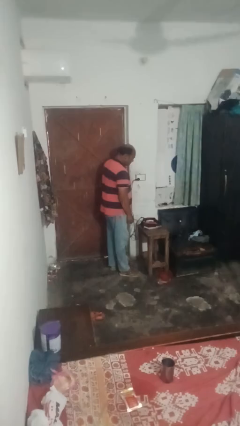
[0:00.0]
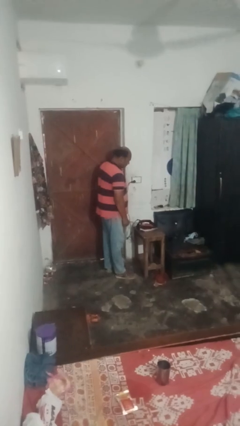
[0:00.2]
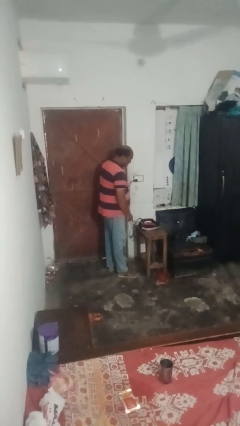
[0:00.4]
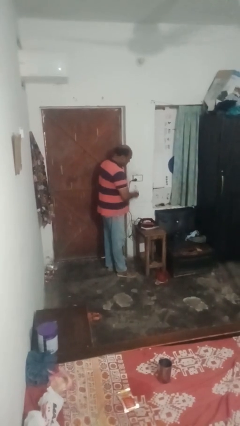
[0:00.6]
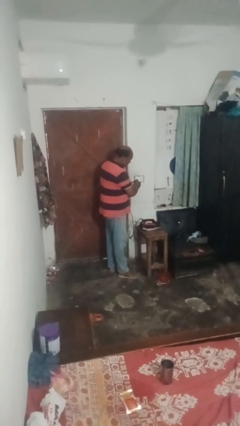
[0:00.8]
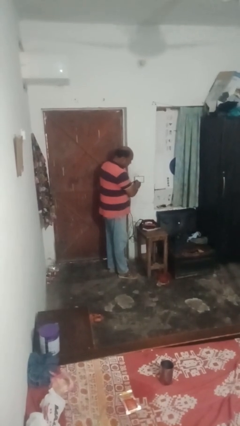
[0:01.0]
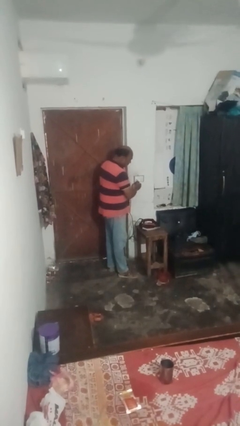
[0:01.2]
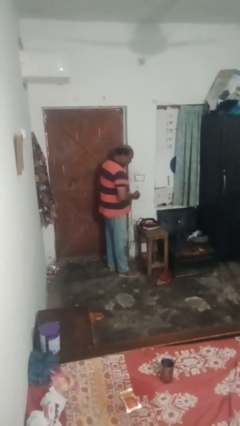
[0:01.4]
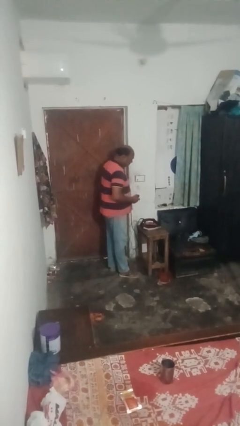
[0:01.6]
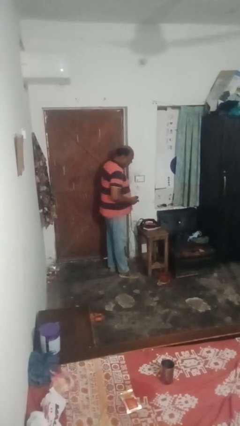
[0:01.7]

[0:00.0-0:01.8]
person unplugs from electrical socket

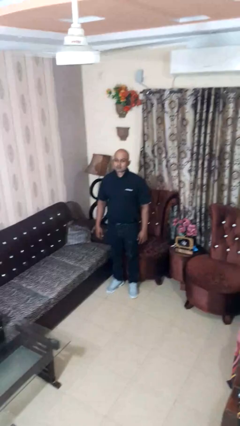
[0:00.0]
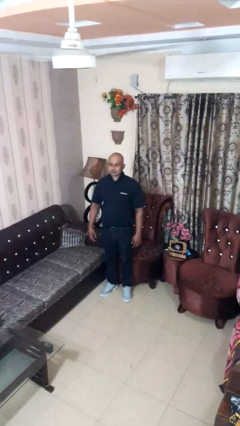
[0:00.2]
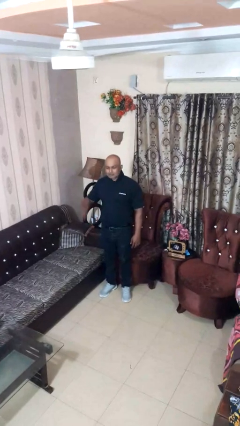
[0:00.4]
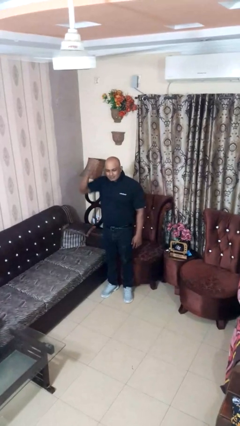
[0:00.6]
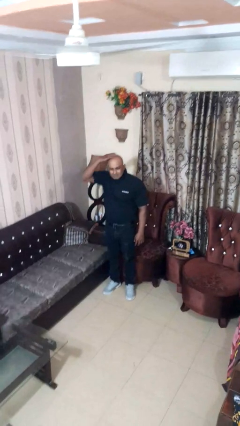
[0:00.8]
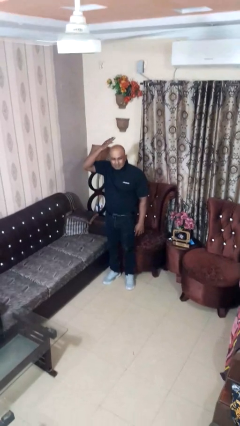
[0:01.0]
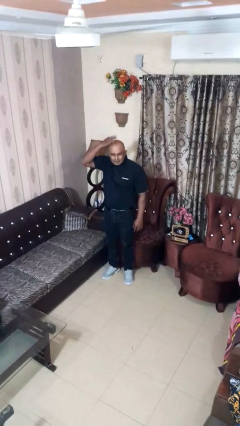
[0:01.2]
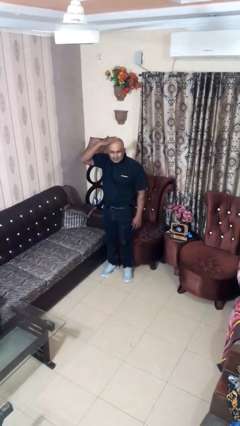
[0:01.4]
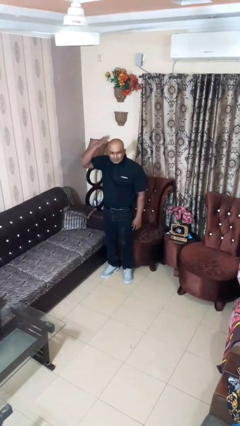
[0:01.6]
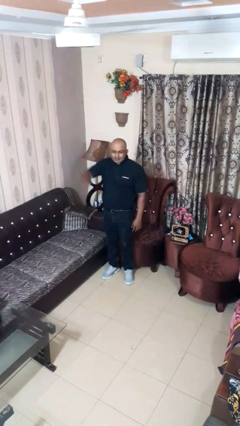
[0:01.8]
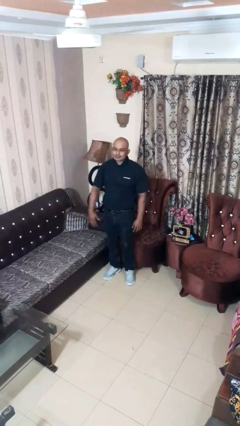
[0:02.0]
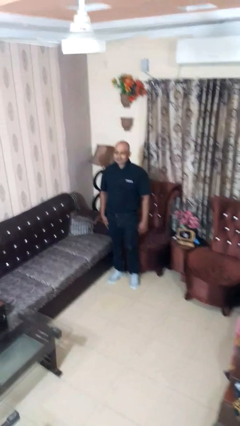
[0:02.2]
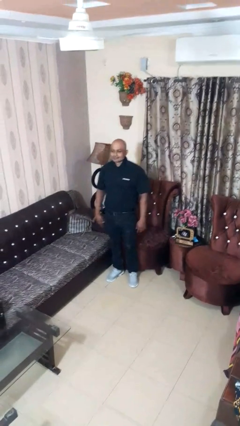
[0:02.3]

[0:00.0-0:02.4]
person pats head

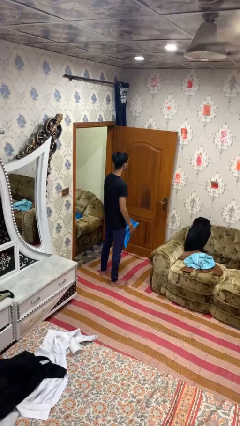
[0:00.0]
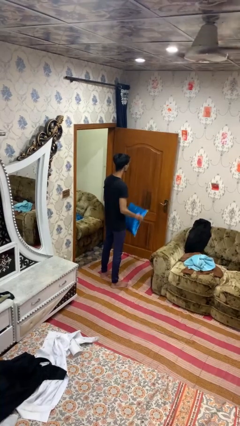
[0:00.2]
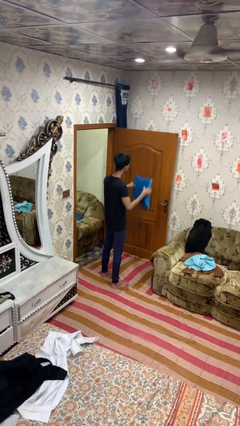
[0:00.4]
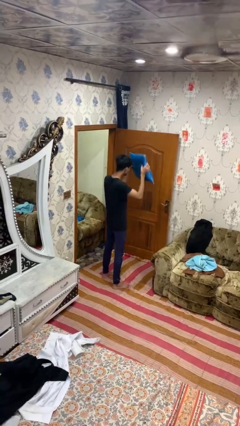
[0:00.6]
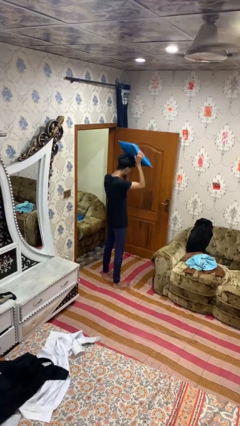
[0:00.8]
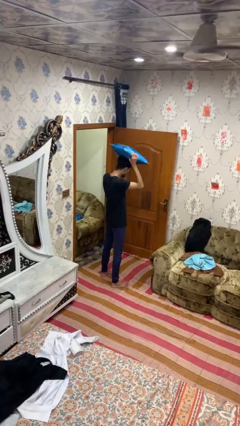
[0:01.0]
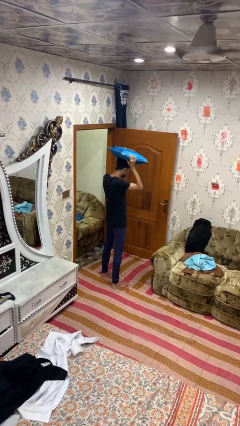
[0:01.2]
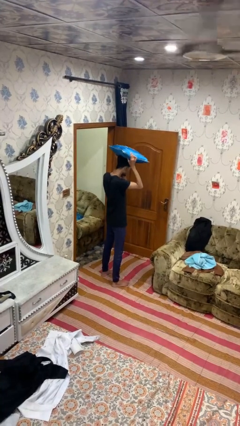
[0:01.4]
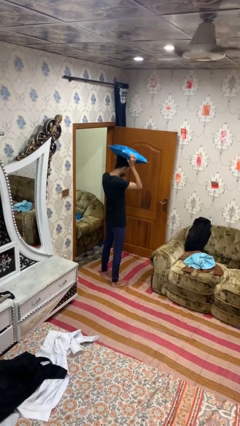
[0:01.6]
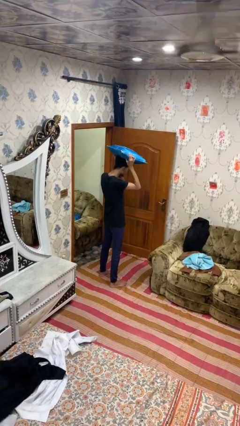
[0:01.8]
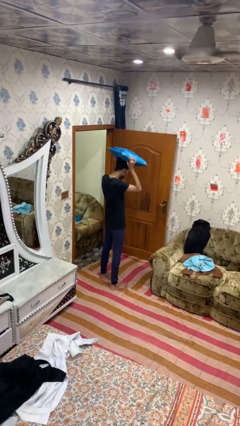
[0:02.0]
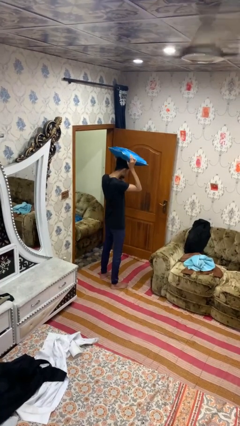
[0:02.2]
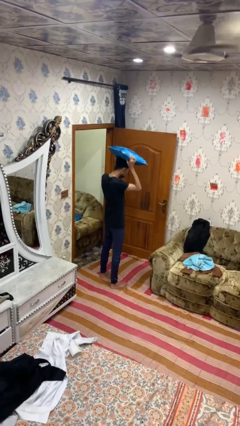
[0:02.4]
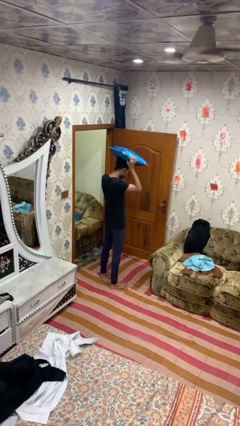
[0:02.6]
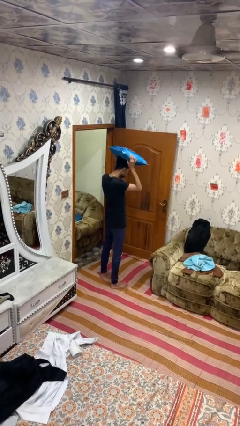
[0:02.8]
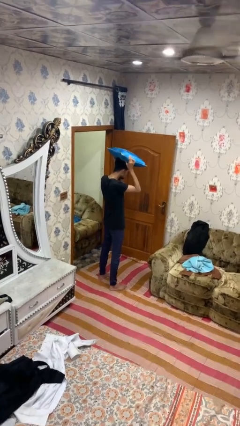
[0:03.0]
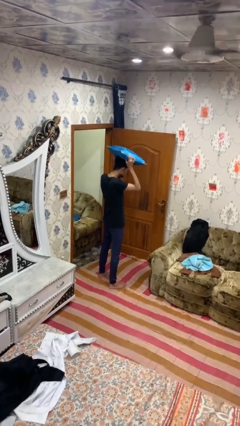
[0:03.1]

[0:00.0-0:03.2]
person holds object above head

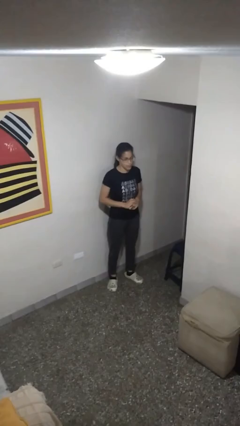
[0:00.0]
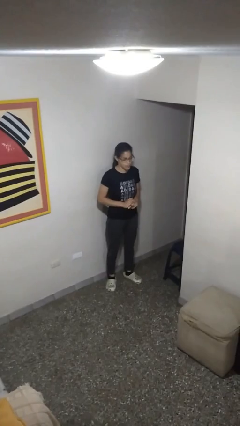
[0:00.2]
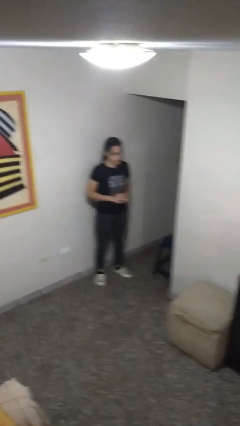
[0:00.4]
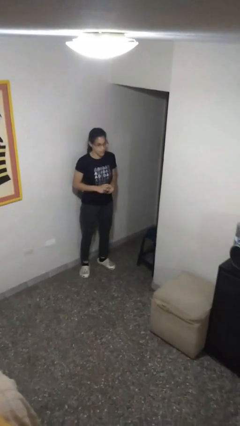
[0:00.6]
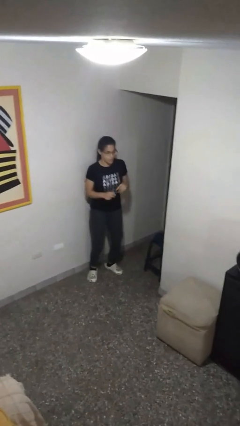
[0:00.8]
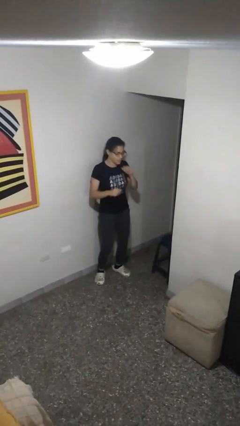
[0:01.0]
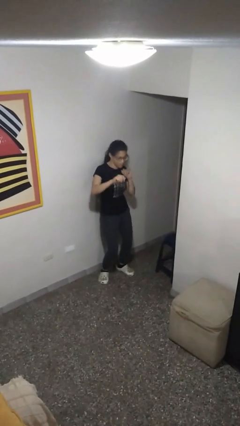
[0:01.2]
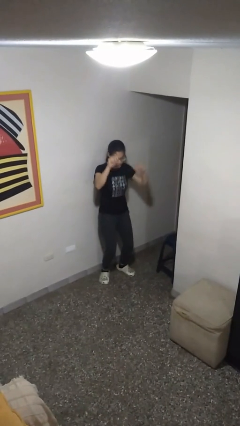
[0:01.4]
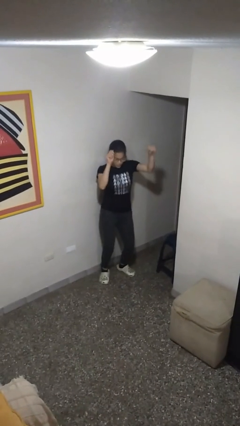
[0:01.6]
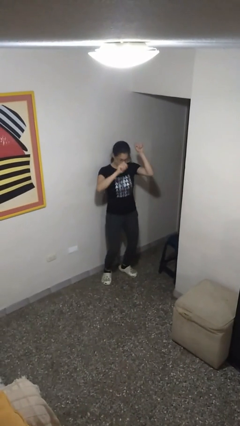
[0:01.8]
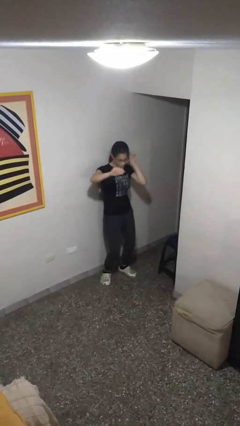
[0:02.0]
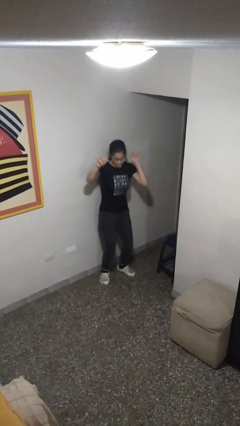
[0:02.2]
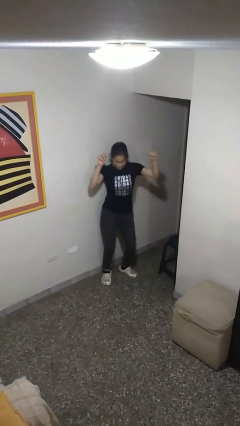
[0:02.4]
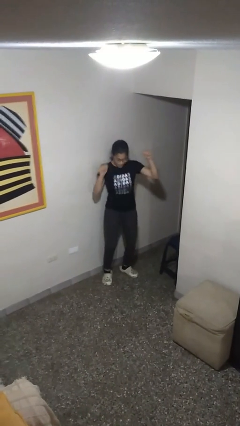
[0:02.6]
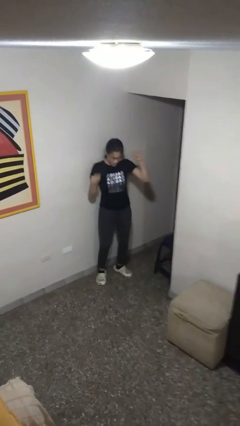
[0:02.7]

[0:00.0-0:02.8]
person dances in place

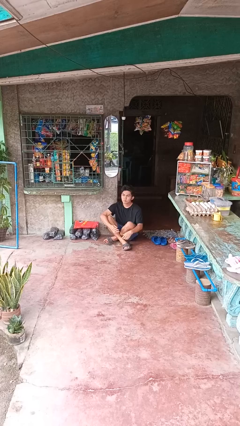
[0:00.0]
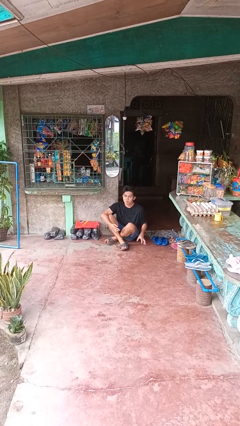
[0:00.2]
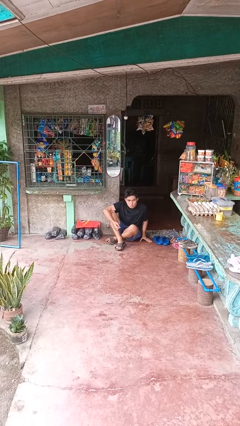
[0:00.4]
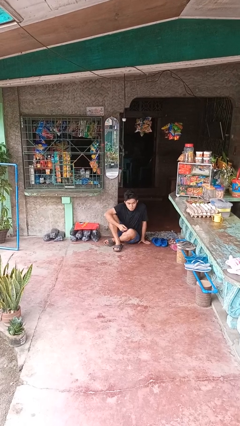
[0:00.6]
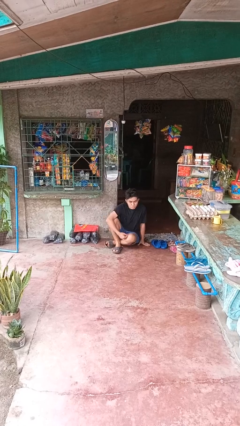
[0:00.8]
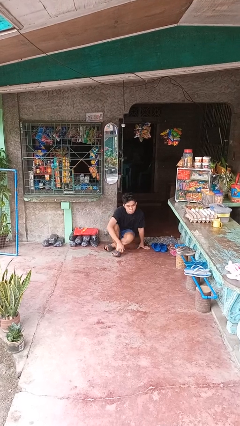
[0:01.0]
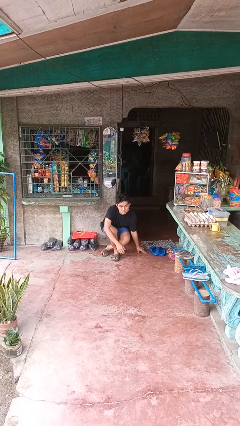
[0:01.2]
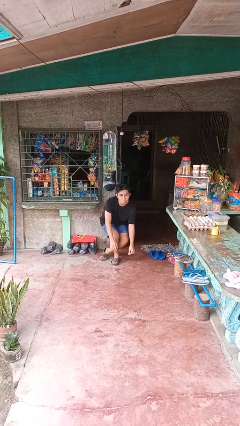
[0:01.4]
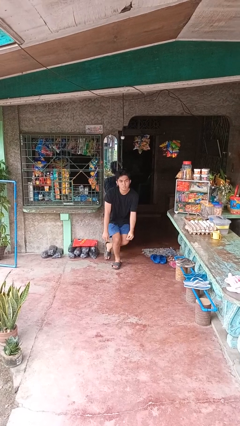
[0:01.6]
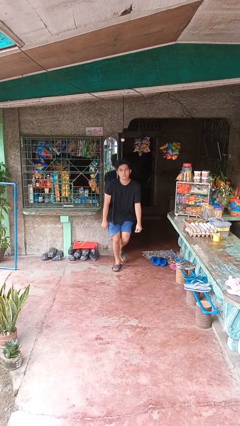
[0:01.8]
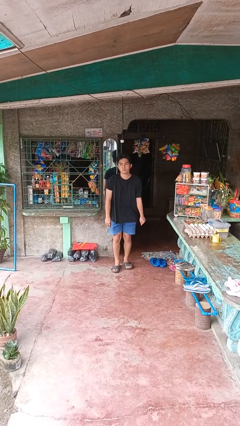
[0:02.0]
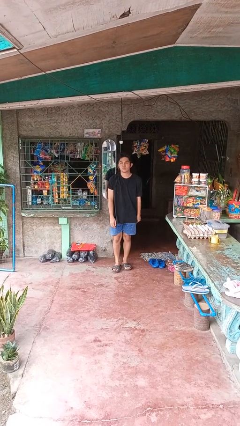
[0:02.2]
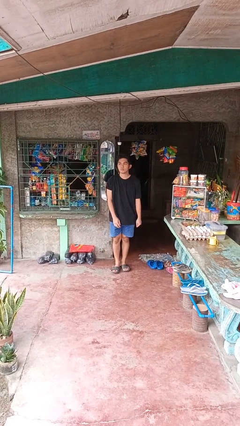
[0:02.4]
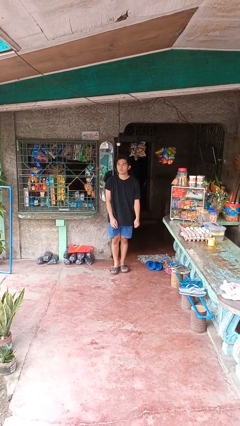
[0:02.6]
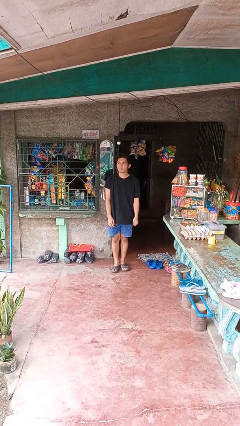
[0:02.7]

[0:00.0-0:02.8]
person stands up from floor

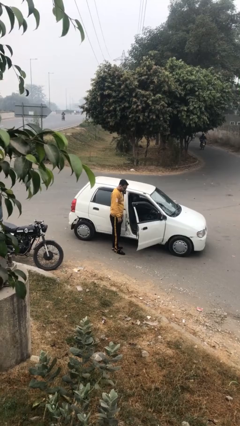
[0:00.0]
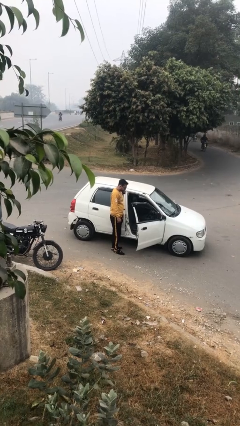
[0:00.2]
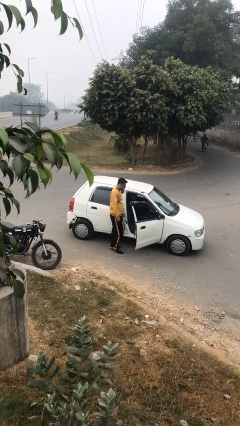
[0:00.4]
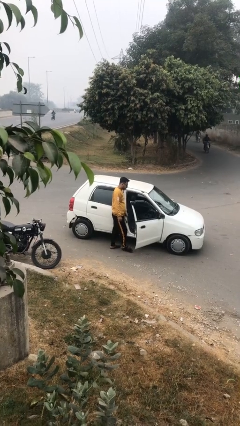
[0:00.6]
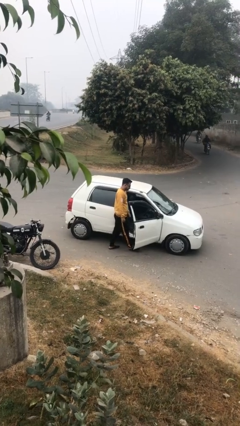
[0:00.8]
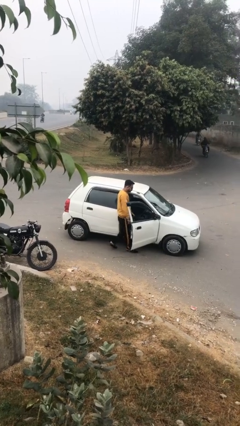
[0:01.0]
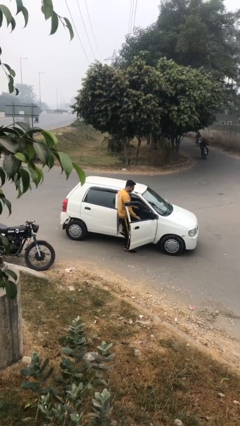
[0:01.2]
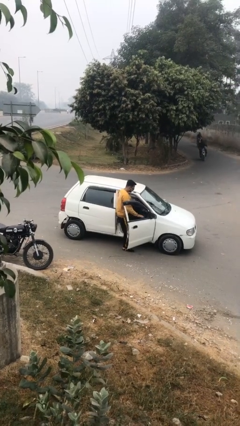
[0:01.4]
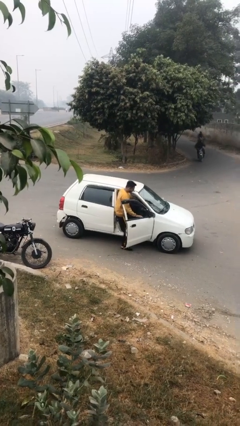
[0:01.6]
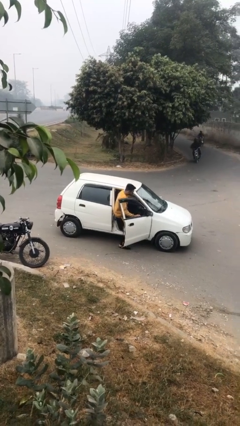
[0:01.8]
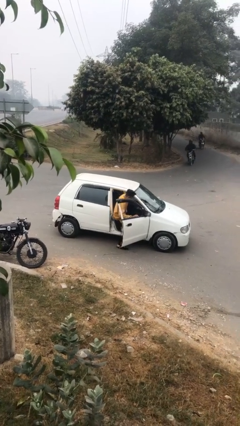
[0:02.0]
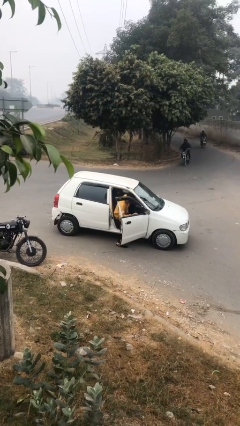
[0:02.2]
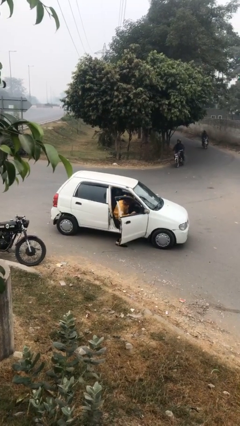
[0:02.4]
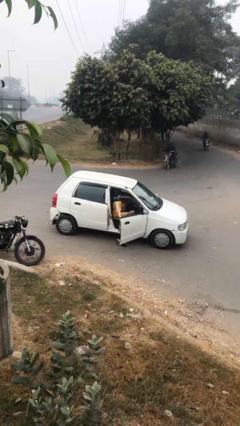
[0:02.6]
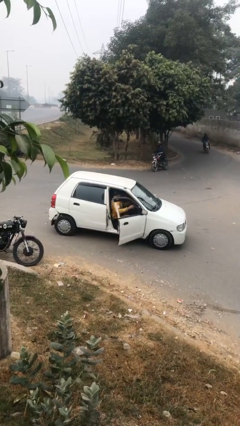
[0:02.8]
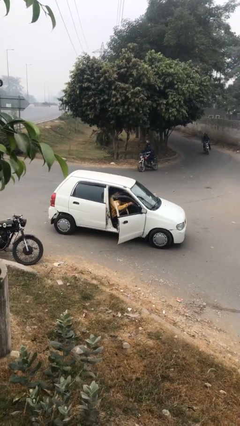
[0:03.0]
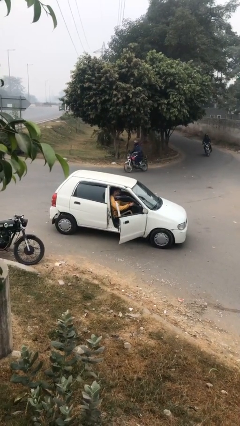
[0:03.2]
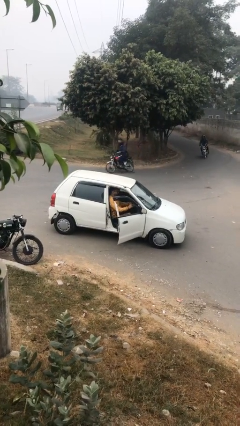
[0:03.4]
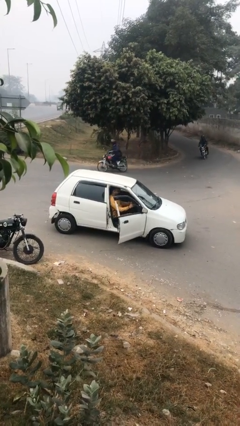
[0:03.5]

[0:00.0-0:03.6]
person enters car

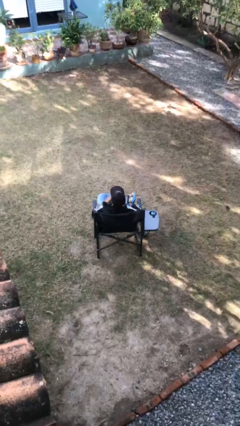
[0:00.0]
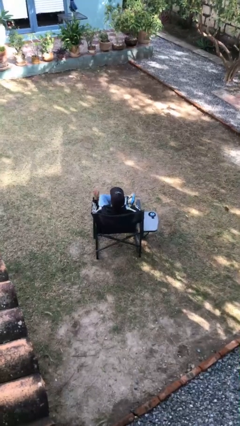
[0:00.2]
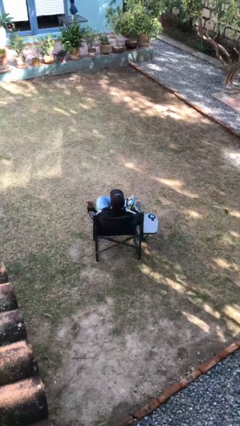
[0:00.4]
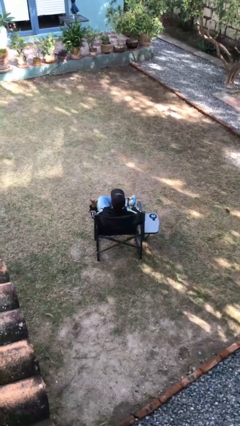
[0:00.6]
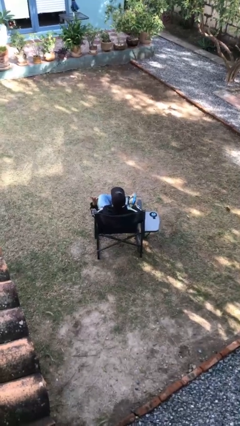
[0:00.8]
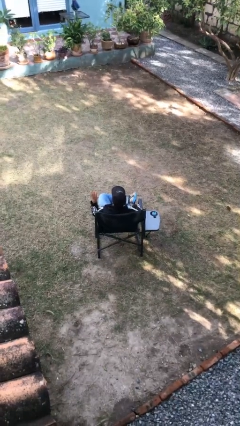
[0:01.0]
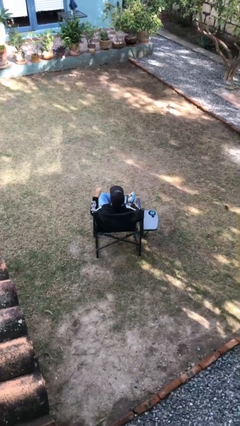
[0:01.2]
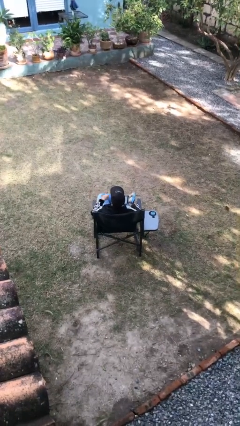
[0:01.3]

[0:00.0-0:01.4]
person gestures number four
